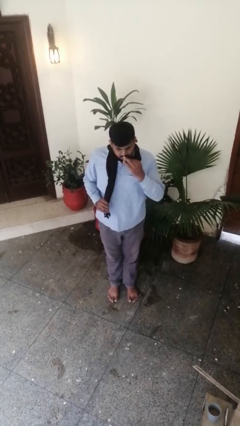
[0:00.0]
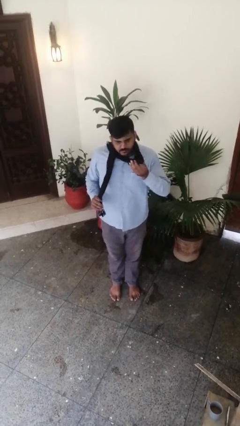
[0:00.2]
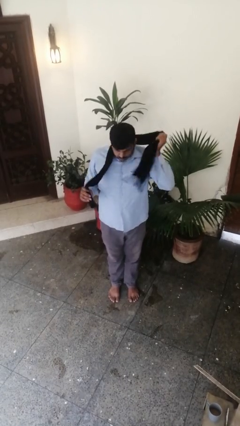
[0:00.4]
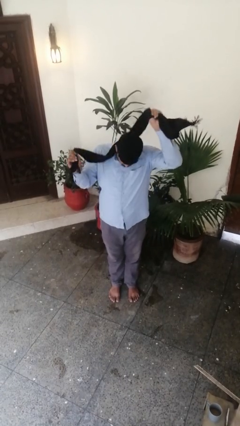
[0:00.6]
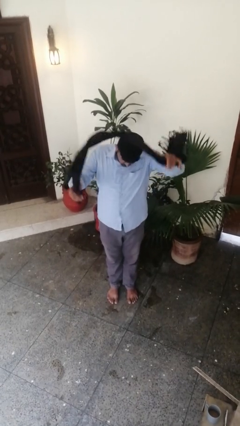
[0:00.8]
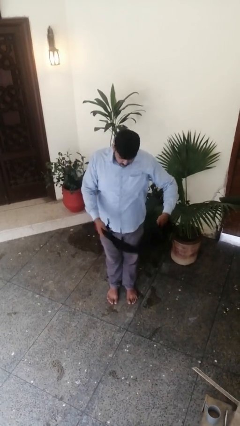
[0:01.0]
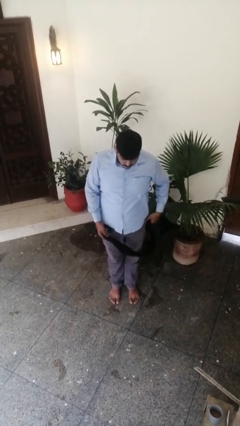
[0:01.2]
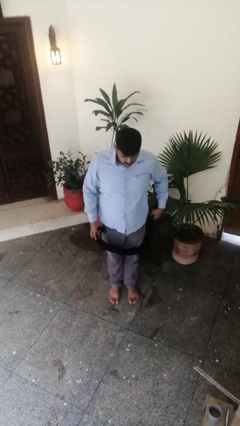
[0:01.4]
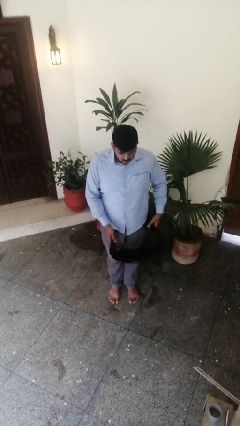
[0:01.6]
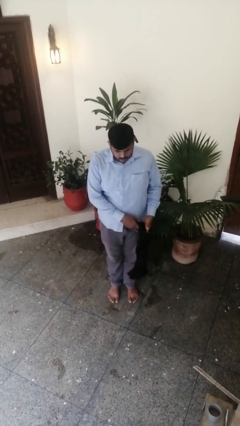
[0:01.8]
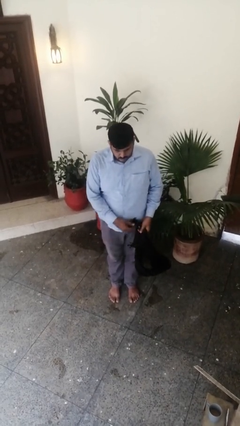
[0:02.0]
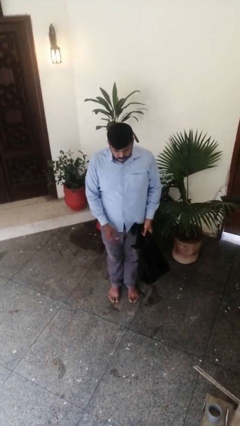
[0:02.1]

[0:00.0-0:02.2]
person takes off scarf

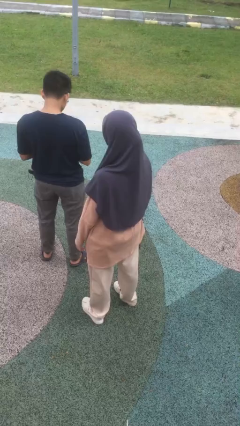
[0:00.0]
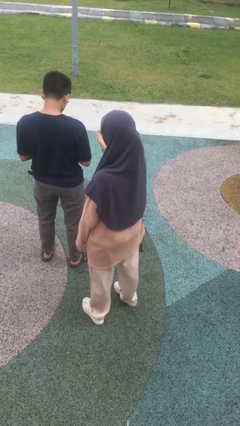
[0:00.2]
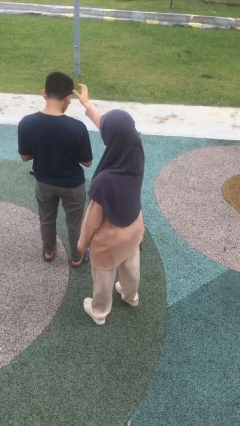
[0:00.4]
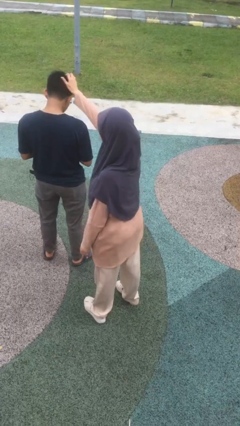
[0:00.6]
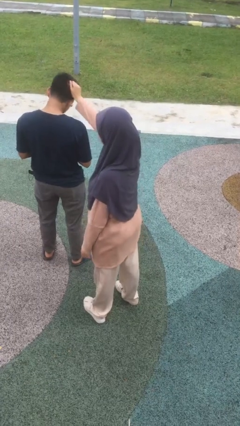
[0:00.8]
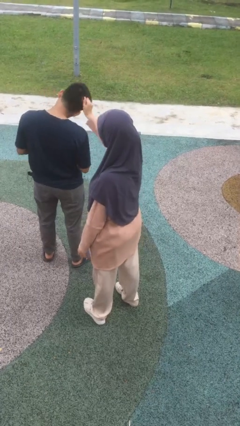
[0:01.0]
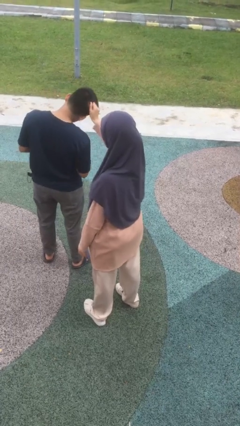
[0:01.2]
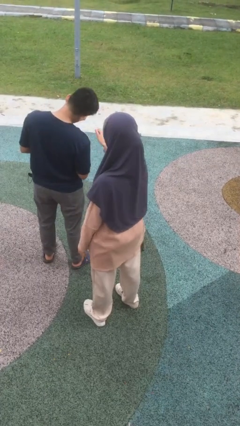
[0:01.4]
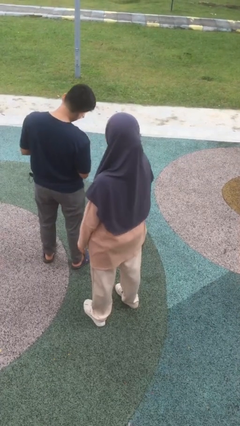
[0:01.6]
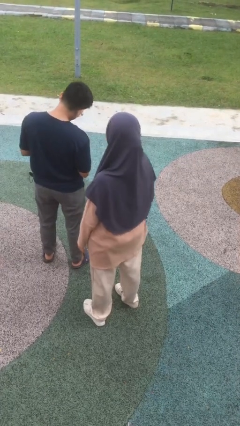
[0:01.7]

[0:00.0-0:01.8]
person grabs person by hair

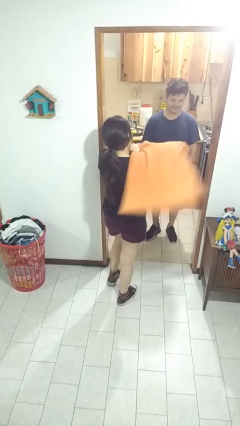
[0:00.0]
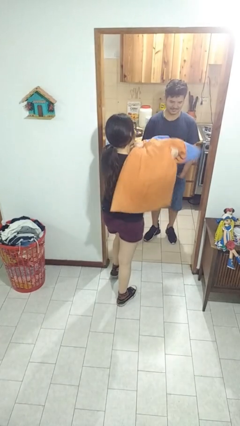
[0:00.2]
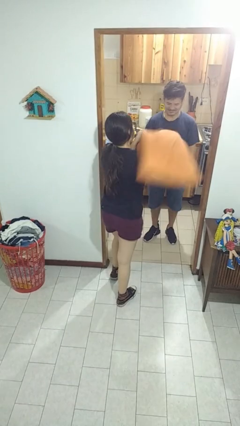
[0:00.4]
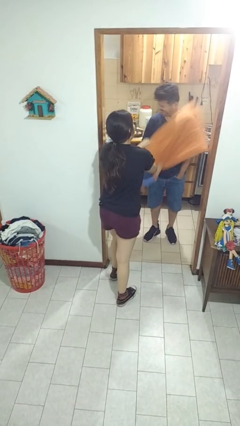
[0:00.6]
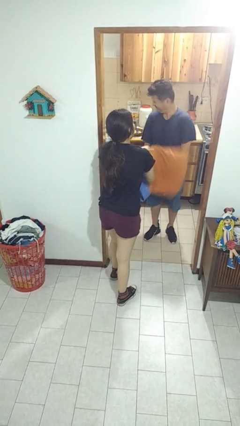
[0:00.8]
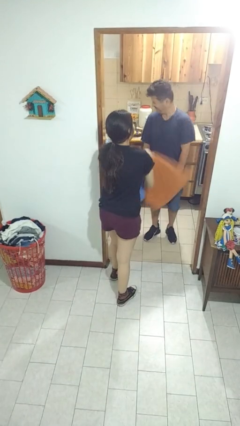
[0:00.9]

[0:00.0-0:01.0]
person hits person with pillow

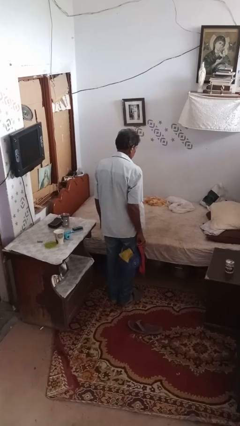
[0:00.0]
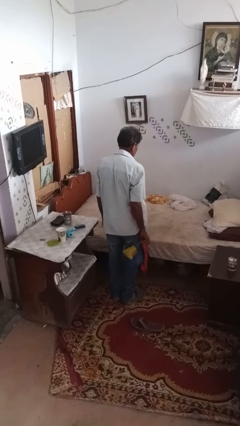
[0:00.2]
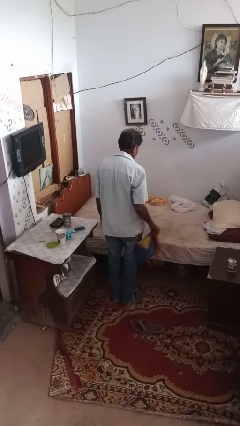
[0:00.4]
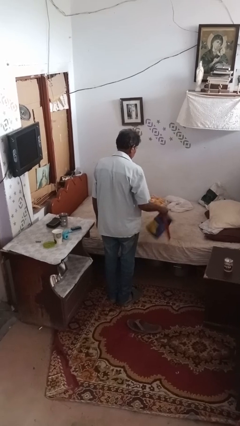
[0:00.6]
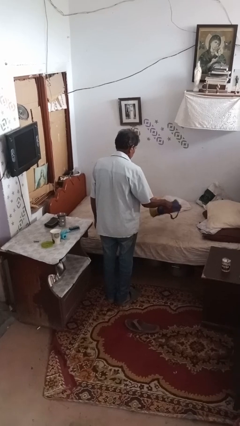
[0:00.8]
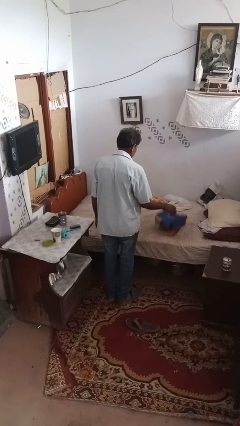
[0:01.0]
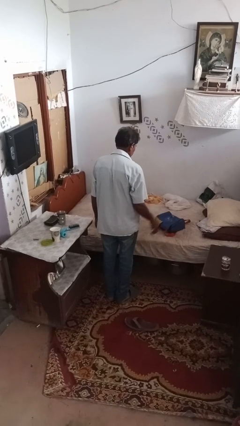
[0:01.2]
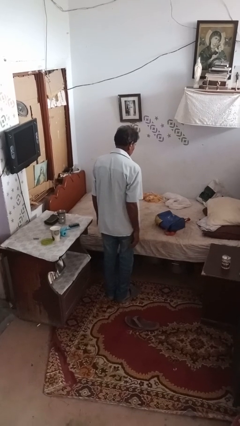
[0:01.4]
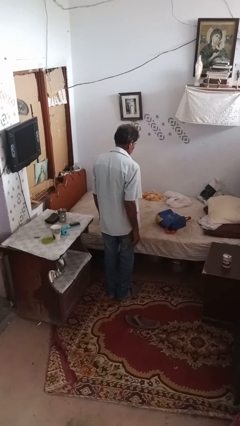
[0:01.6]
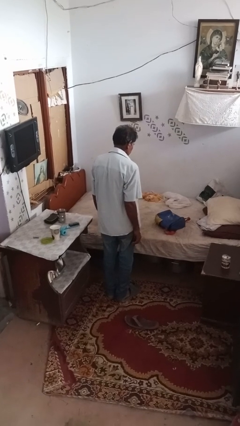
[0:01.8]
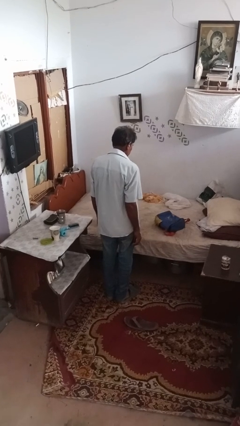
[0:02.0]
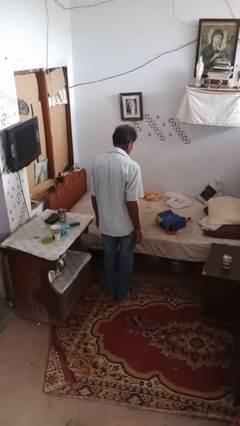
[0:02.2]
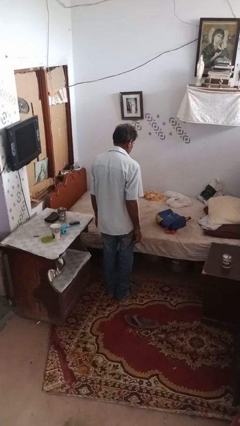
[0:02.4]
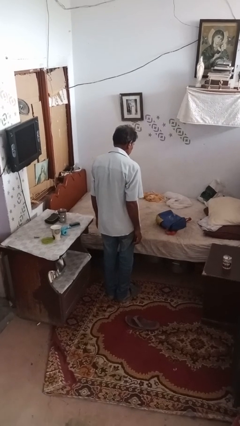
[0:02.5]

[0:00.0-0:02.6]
person throws object on bed

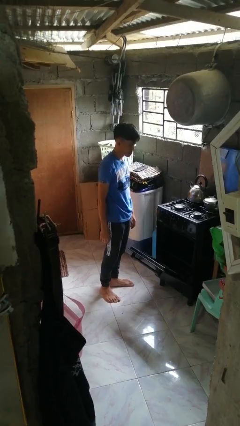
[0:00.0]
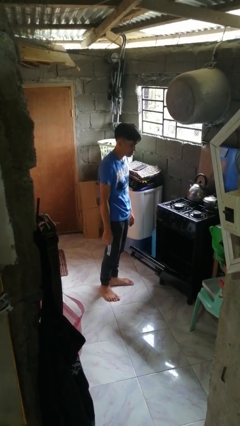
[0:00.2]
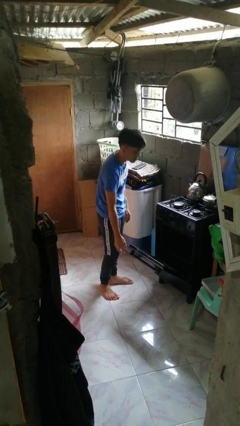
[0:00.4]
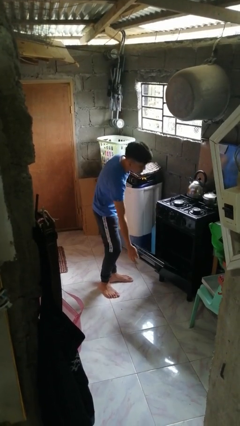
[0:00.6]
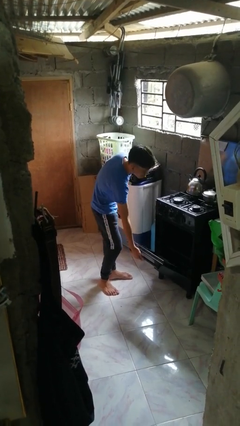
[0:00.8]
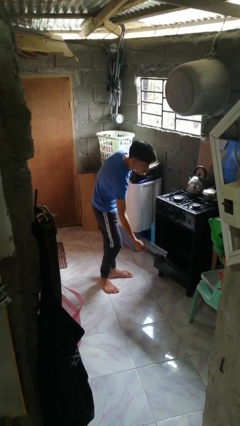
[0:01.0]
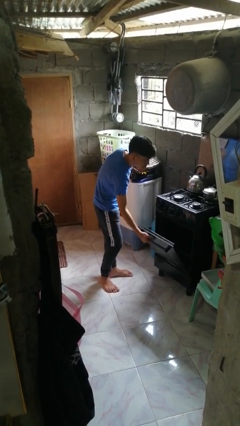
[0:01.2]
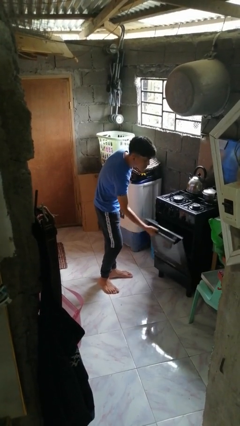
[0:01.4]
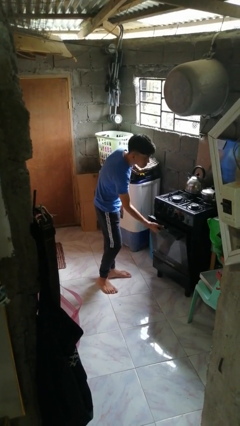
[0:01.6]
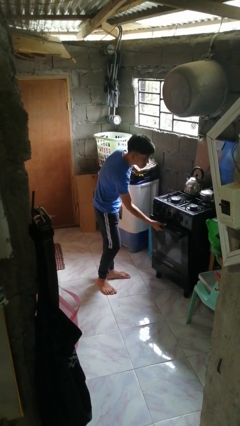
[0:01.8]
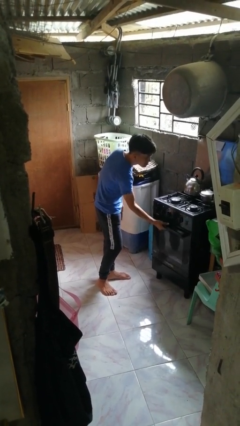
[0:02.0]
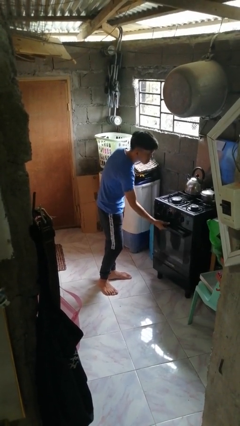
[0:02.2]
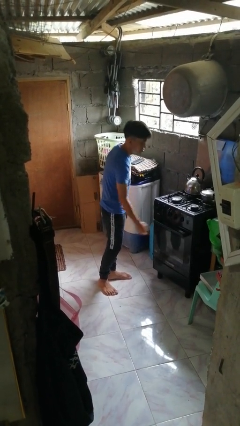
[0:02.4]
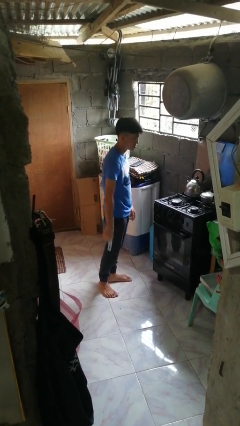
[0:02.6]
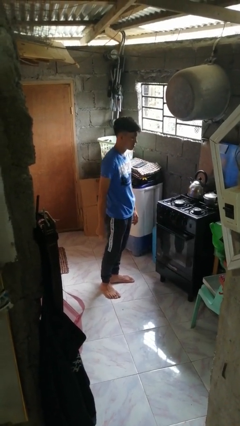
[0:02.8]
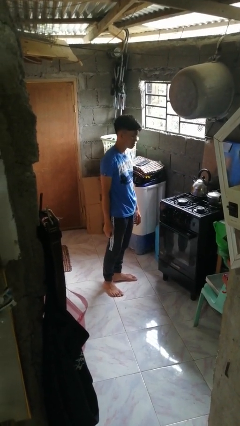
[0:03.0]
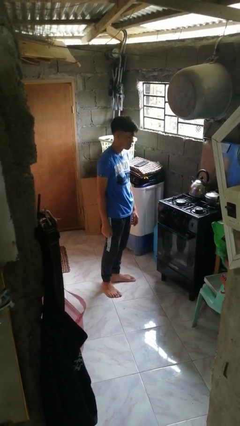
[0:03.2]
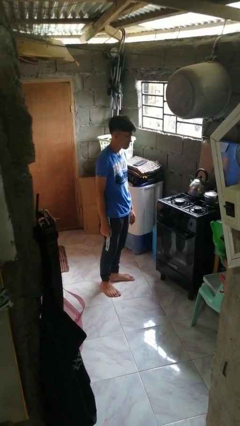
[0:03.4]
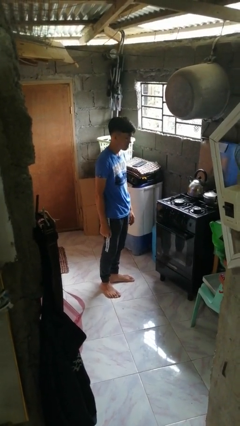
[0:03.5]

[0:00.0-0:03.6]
person closes oven door

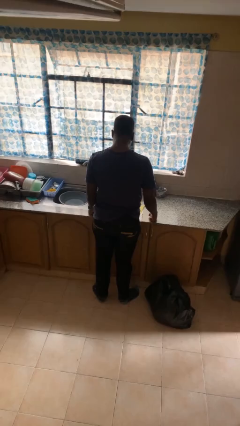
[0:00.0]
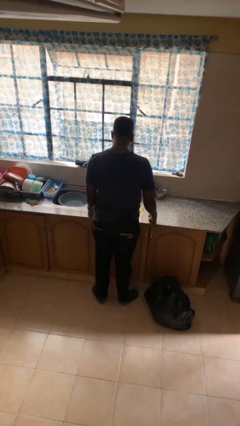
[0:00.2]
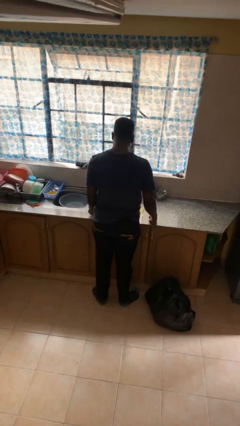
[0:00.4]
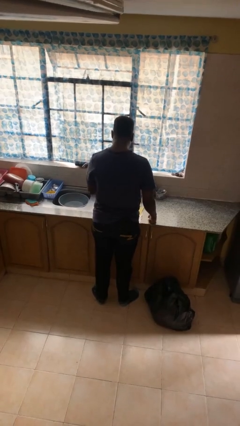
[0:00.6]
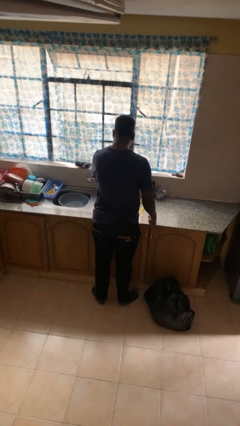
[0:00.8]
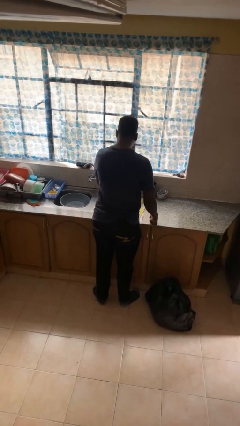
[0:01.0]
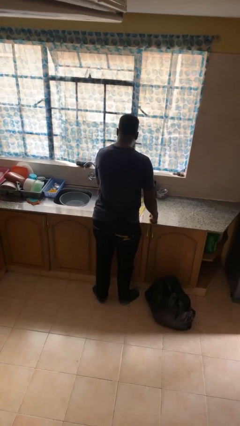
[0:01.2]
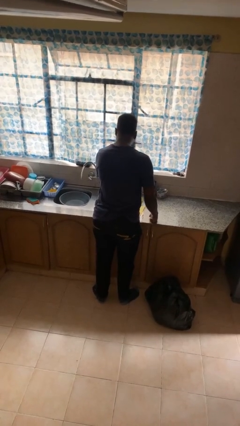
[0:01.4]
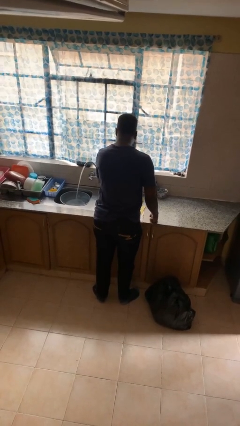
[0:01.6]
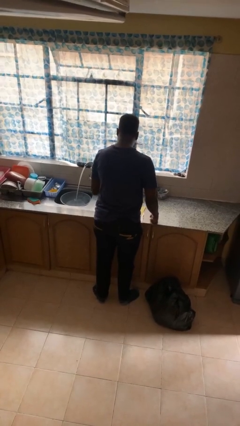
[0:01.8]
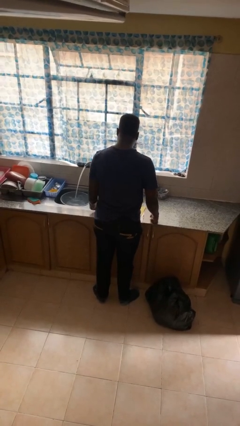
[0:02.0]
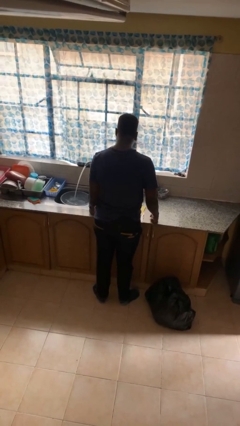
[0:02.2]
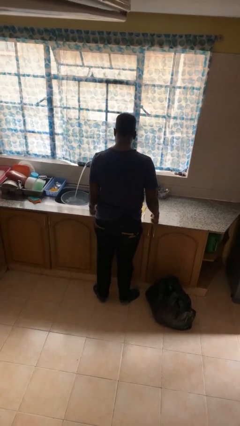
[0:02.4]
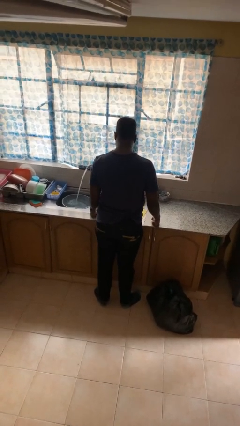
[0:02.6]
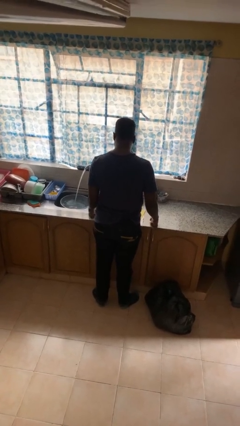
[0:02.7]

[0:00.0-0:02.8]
person turns on faucet

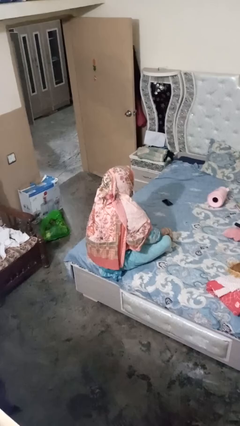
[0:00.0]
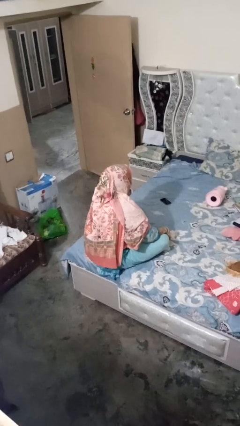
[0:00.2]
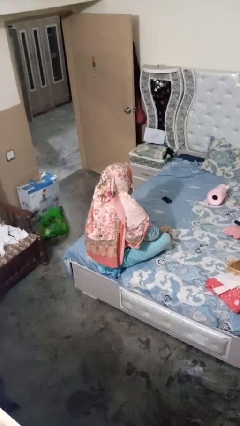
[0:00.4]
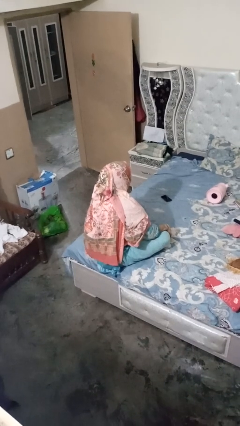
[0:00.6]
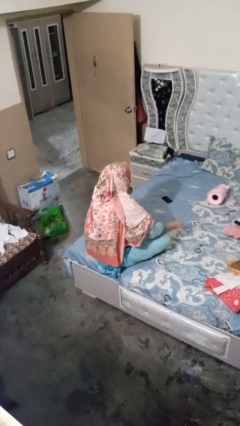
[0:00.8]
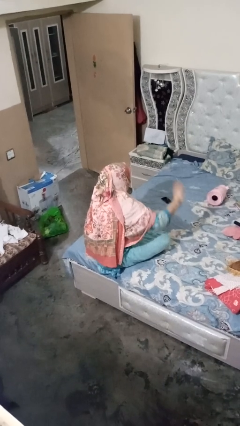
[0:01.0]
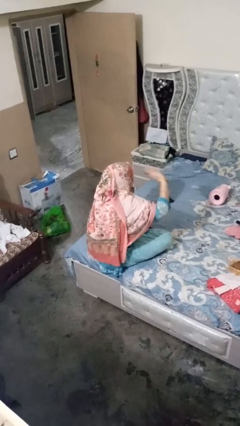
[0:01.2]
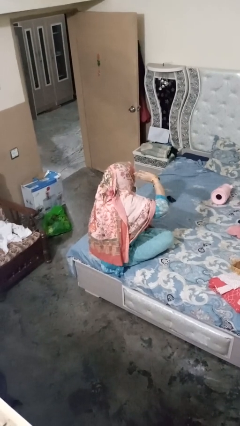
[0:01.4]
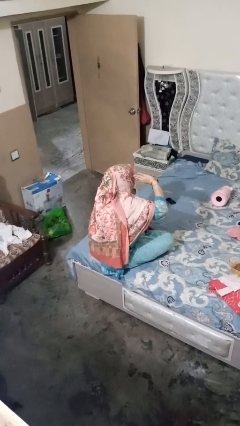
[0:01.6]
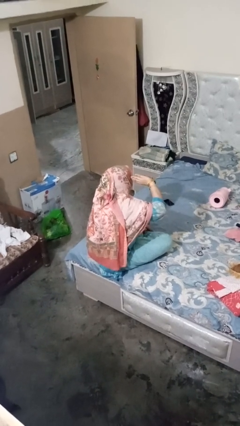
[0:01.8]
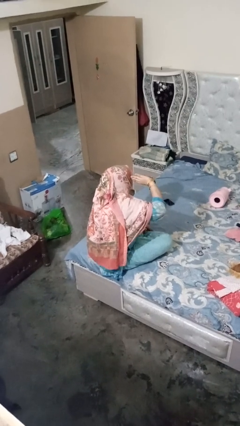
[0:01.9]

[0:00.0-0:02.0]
person salutes

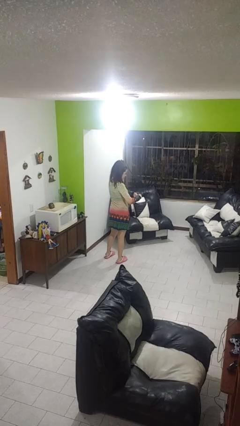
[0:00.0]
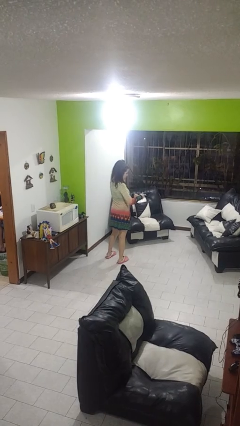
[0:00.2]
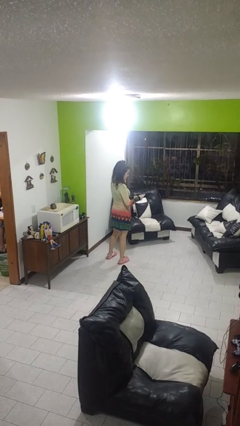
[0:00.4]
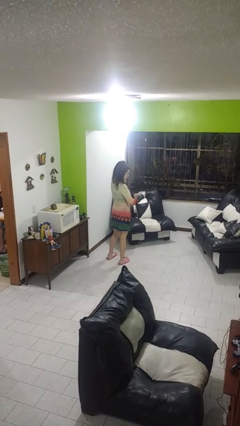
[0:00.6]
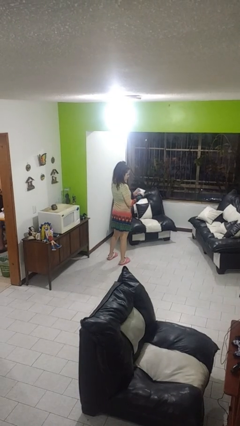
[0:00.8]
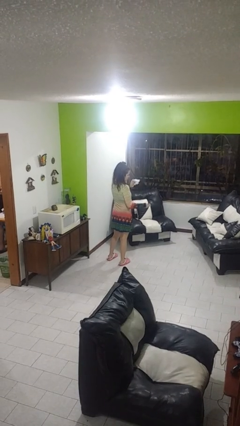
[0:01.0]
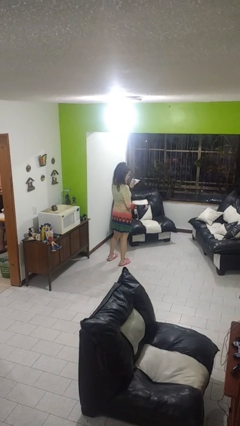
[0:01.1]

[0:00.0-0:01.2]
person tears paper
